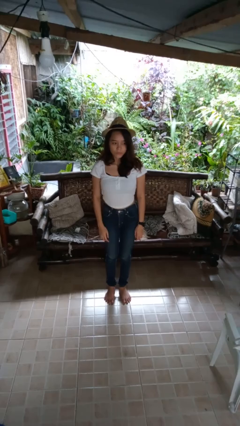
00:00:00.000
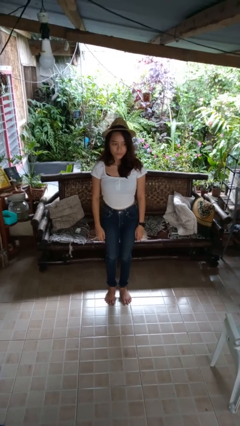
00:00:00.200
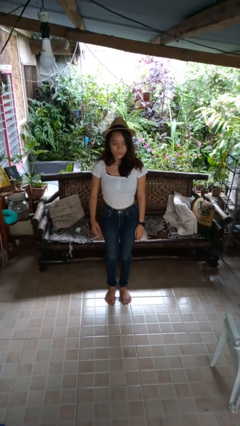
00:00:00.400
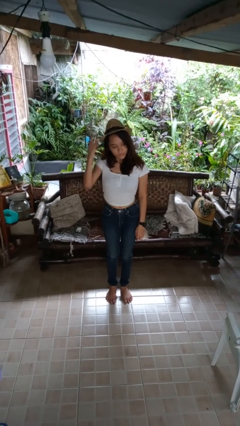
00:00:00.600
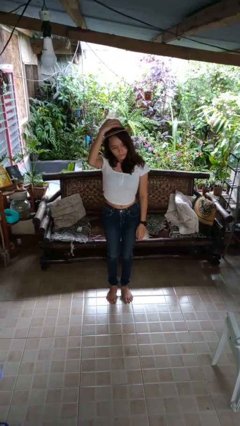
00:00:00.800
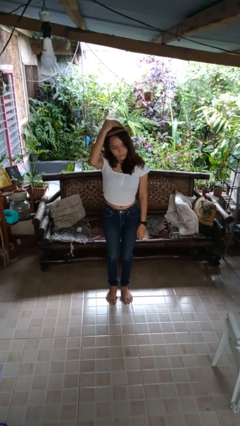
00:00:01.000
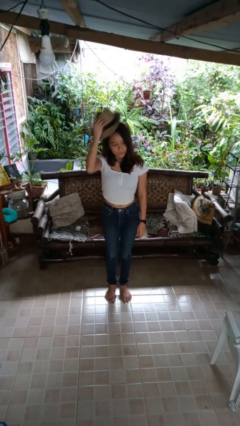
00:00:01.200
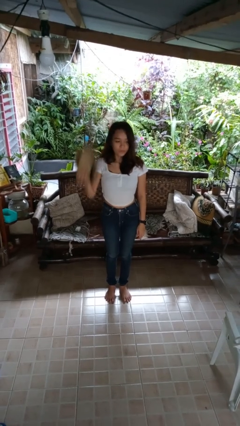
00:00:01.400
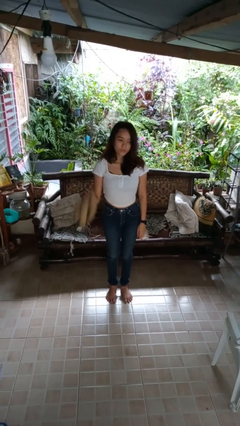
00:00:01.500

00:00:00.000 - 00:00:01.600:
person takes off hat

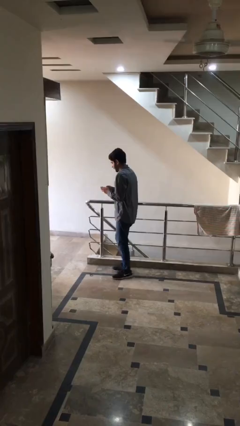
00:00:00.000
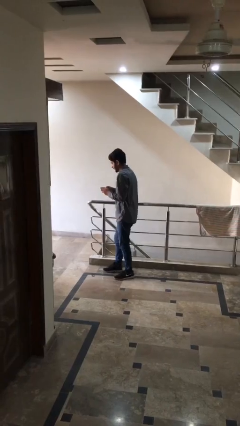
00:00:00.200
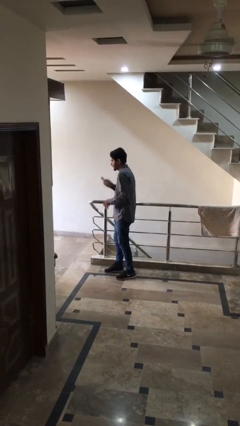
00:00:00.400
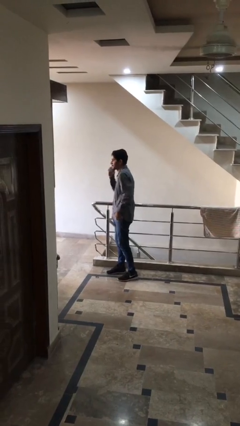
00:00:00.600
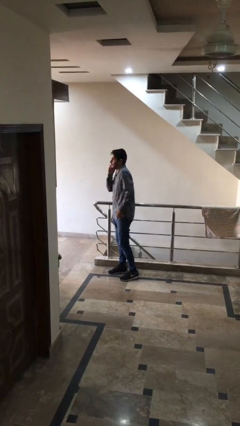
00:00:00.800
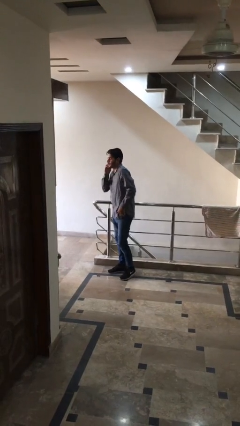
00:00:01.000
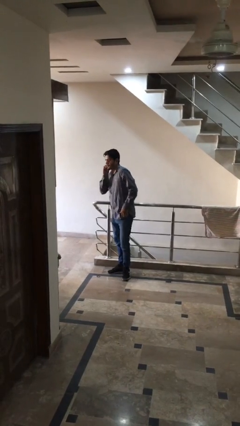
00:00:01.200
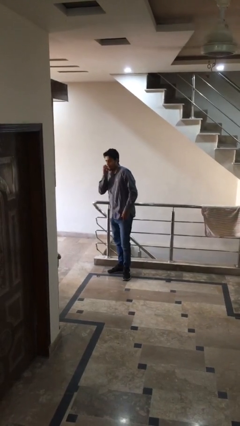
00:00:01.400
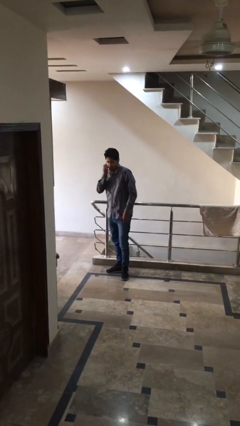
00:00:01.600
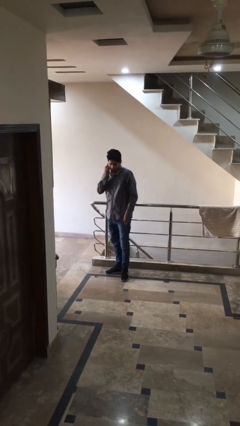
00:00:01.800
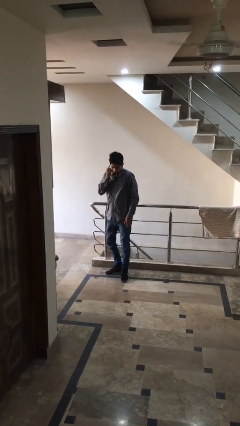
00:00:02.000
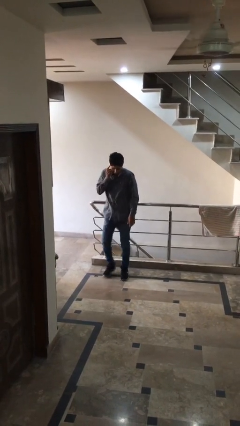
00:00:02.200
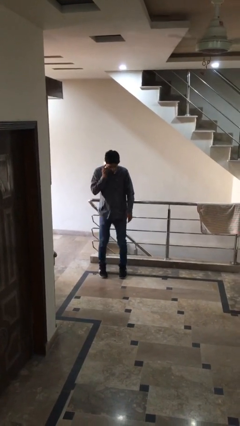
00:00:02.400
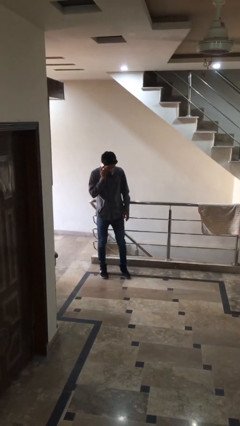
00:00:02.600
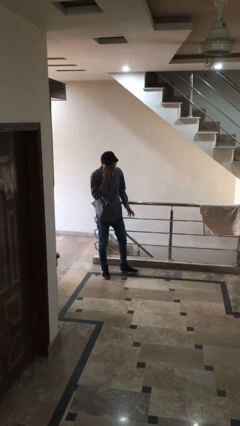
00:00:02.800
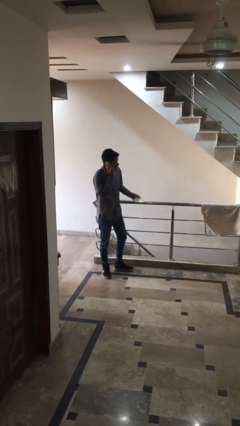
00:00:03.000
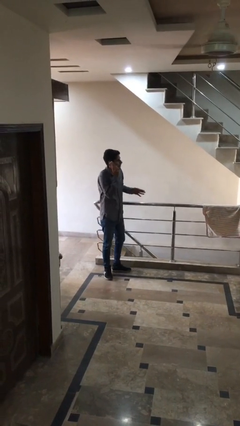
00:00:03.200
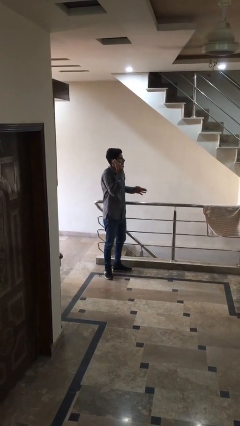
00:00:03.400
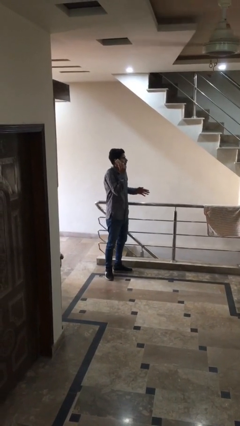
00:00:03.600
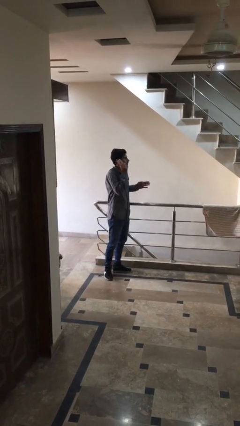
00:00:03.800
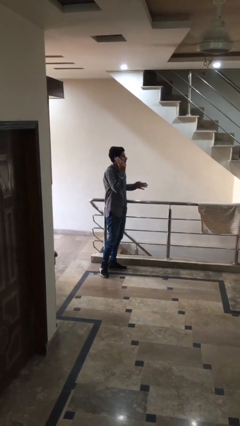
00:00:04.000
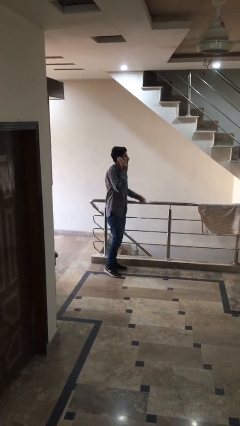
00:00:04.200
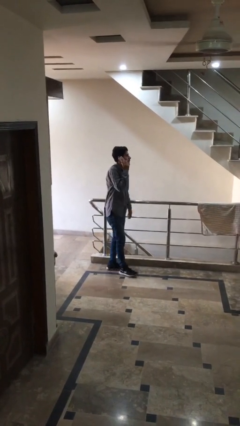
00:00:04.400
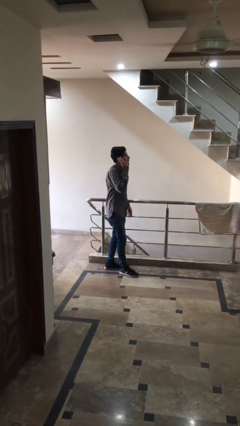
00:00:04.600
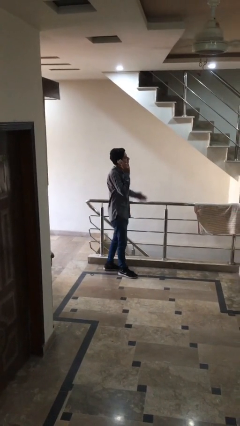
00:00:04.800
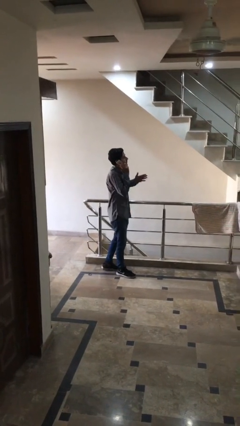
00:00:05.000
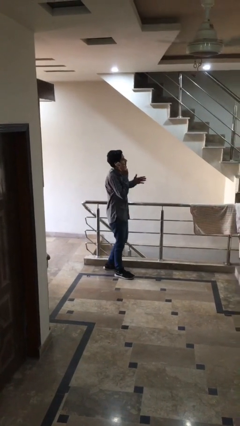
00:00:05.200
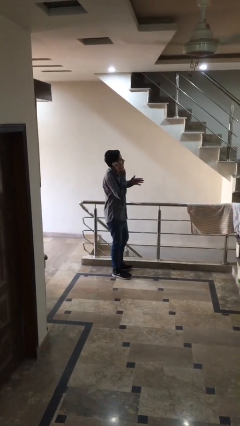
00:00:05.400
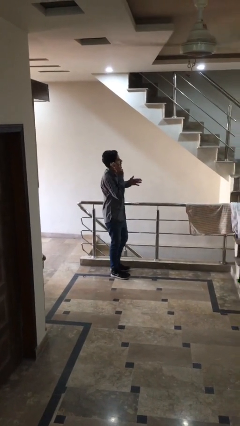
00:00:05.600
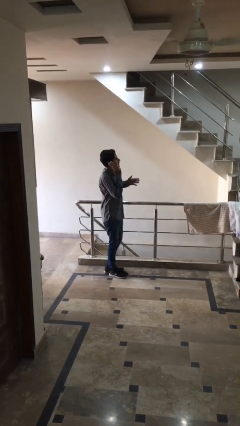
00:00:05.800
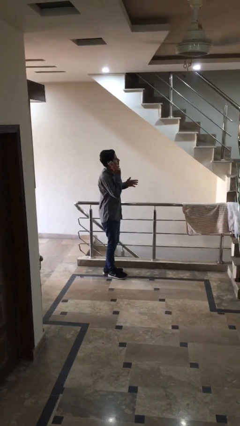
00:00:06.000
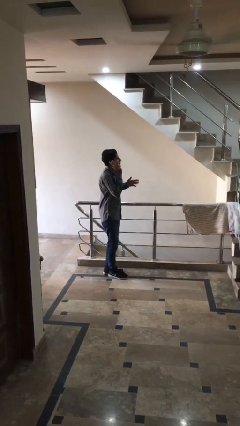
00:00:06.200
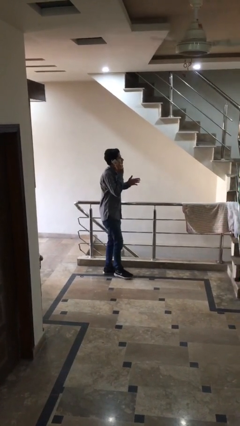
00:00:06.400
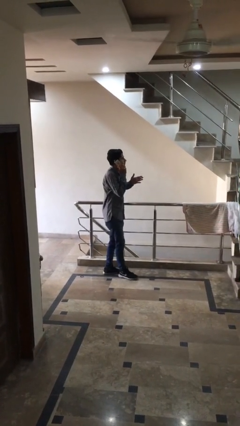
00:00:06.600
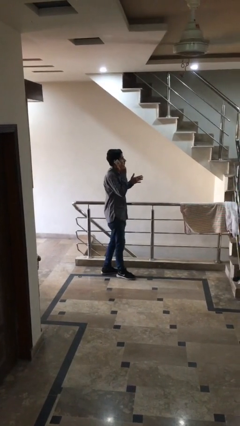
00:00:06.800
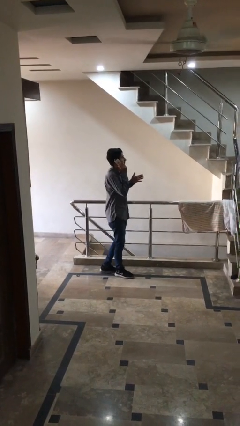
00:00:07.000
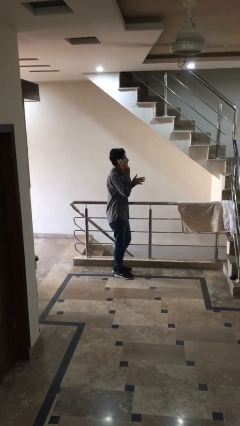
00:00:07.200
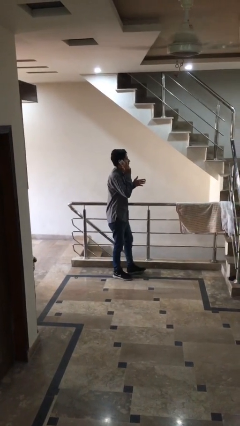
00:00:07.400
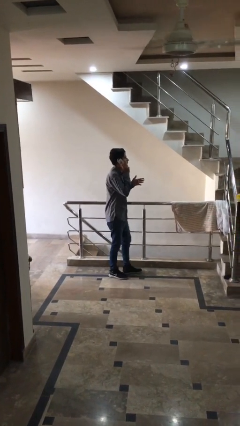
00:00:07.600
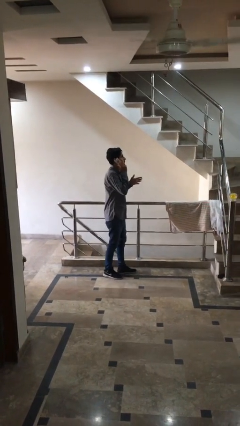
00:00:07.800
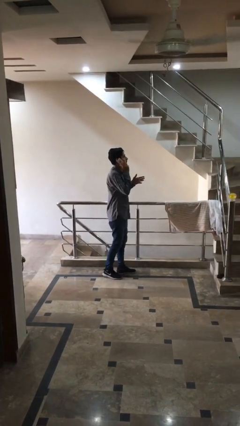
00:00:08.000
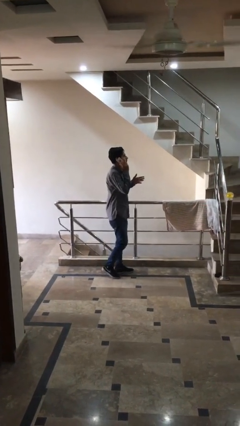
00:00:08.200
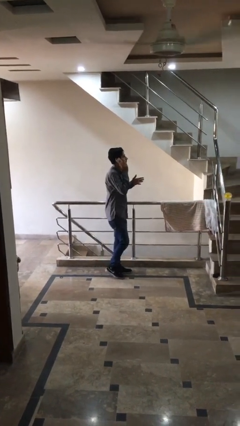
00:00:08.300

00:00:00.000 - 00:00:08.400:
person talks on phone

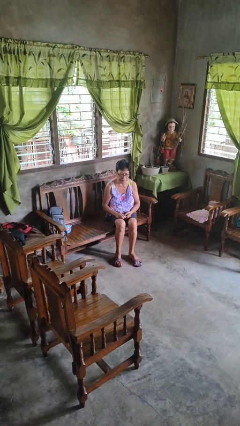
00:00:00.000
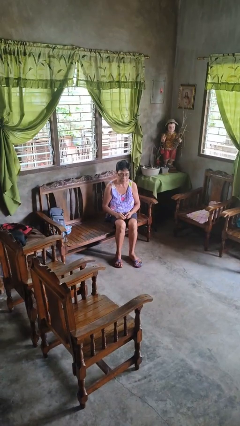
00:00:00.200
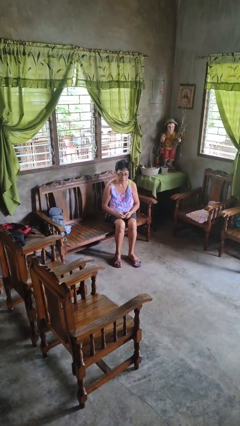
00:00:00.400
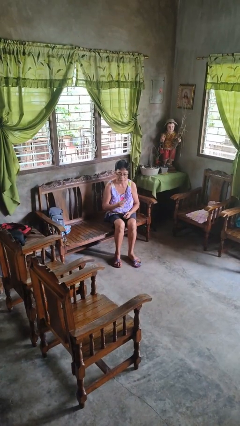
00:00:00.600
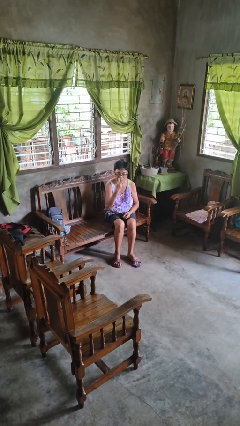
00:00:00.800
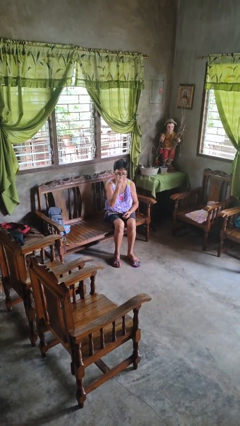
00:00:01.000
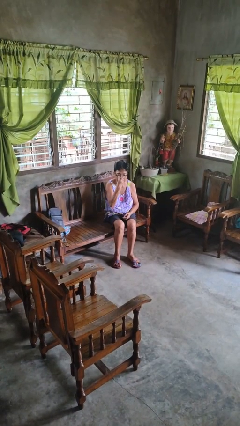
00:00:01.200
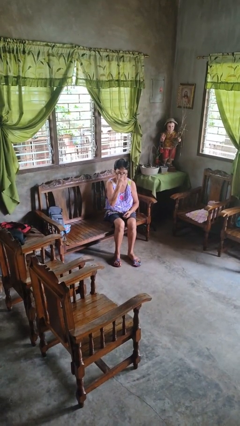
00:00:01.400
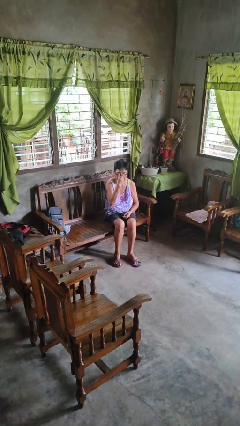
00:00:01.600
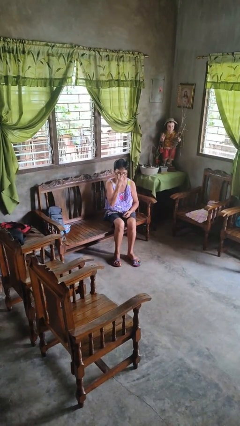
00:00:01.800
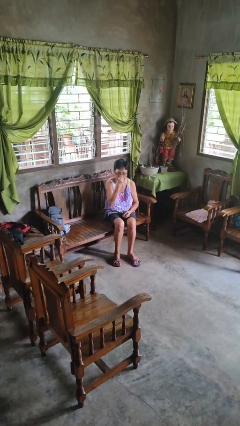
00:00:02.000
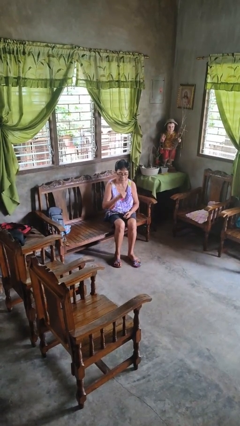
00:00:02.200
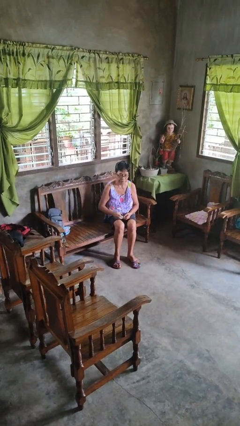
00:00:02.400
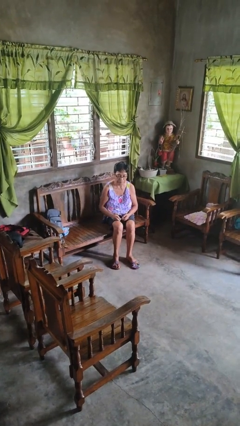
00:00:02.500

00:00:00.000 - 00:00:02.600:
person gestures watch closely

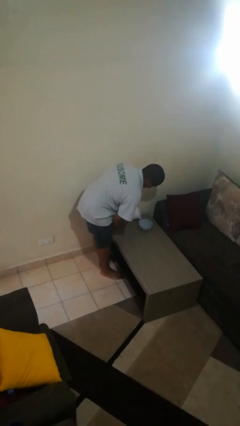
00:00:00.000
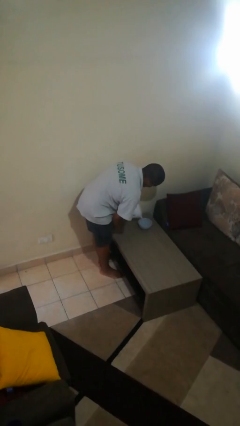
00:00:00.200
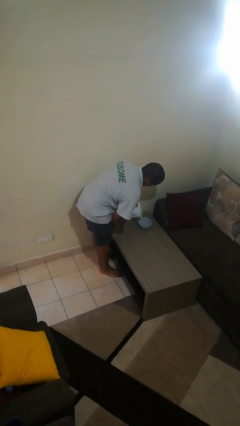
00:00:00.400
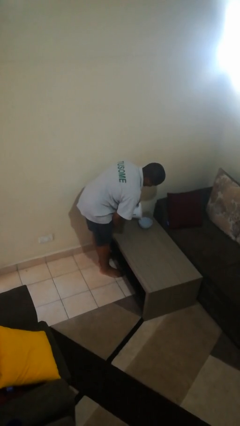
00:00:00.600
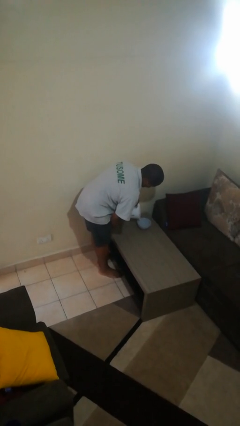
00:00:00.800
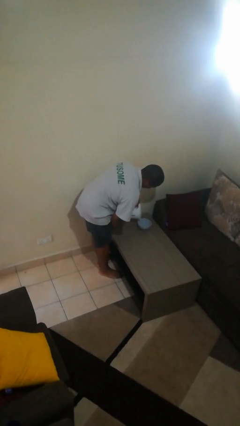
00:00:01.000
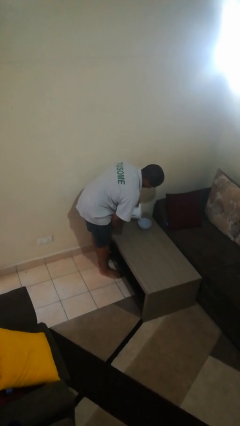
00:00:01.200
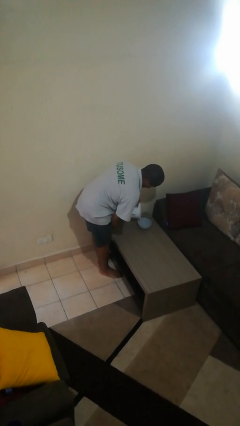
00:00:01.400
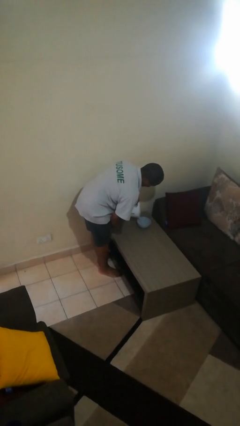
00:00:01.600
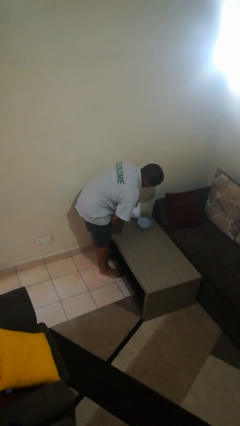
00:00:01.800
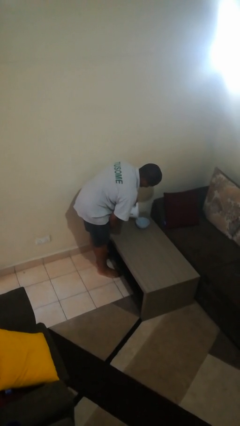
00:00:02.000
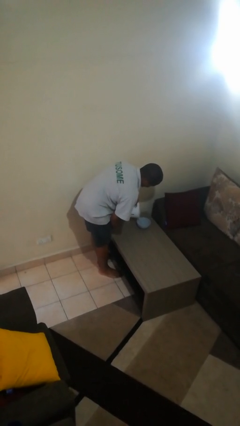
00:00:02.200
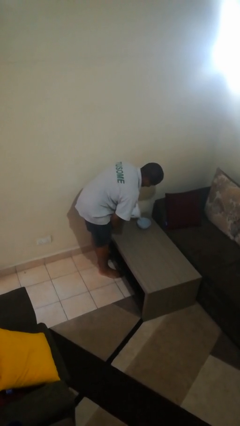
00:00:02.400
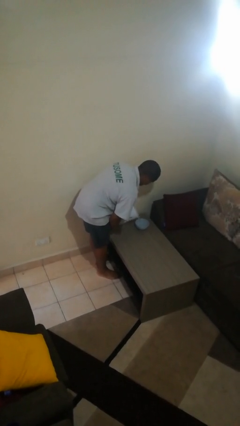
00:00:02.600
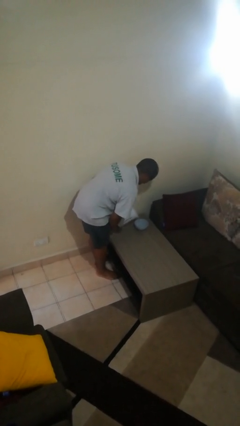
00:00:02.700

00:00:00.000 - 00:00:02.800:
person pours into bowl

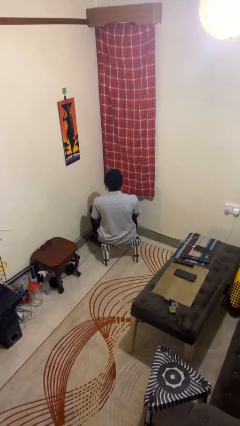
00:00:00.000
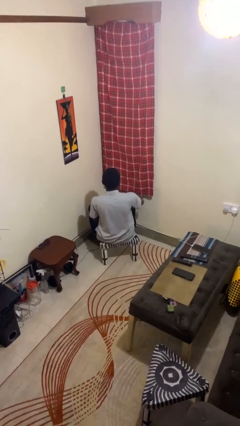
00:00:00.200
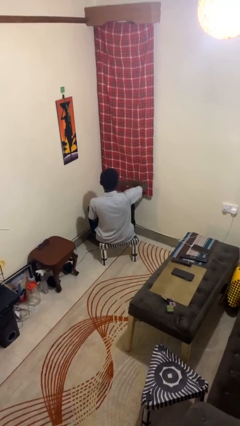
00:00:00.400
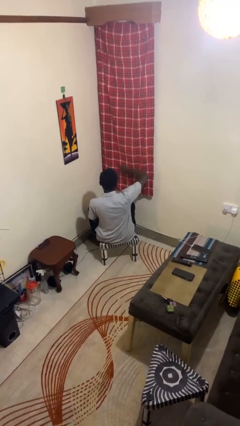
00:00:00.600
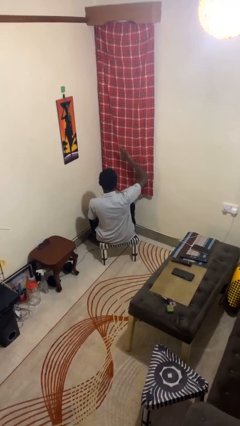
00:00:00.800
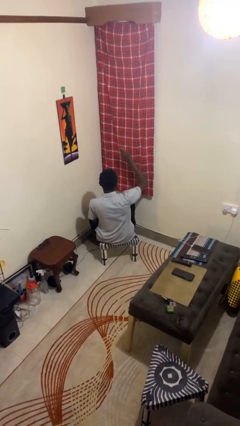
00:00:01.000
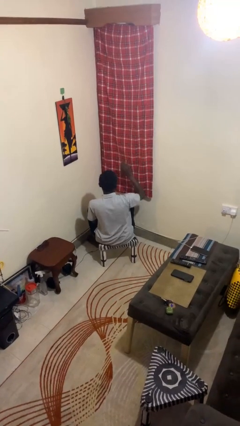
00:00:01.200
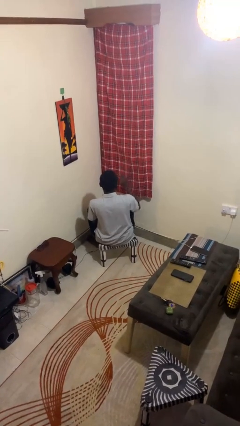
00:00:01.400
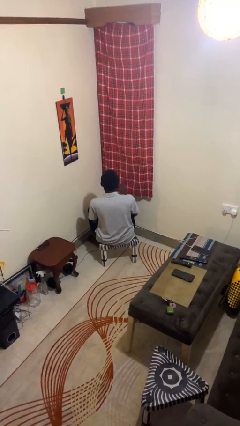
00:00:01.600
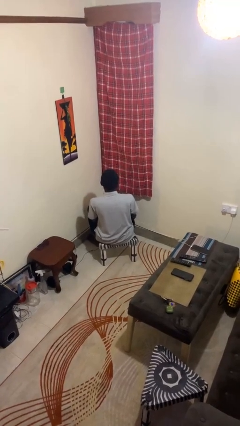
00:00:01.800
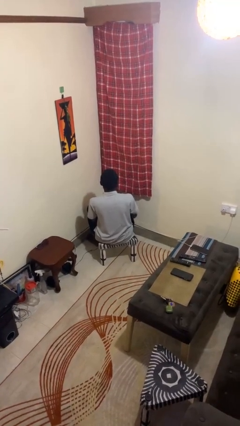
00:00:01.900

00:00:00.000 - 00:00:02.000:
person gestures swipe up
